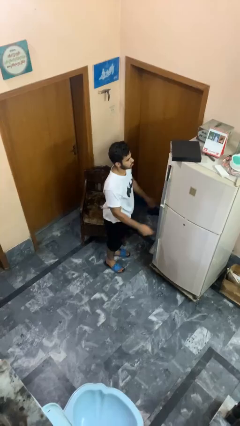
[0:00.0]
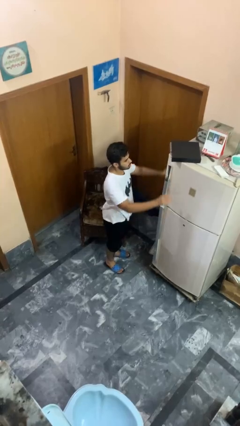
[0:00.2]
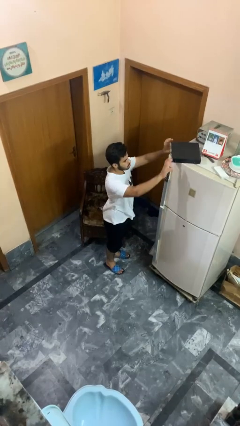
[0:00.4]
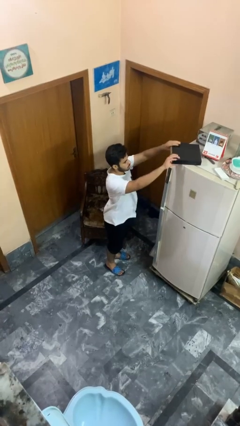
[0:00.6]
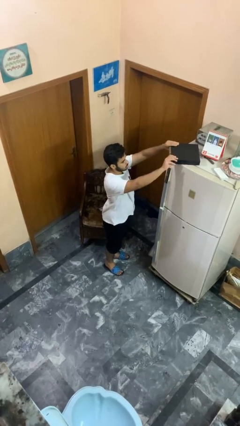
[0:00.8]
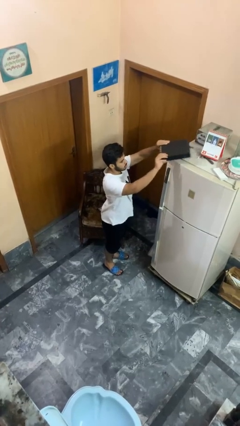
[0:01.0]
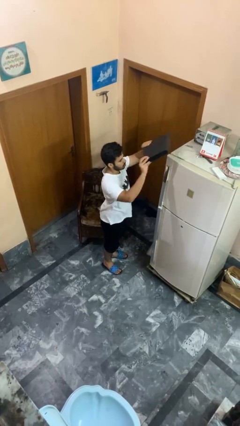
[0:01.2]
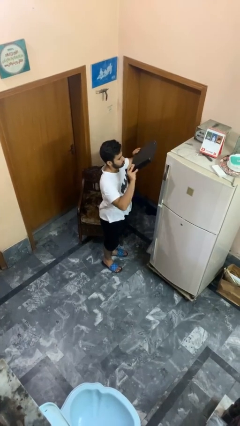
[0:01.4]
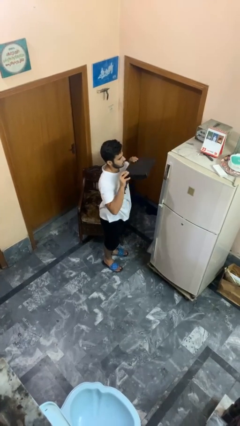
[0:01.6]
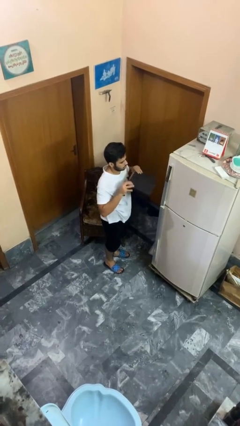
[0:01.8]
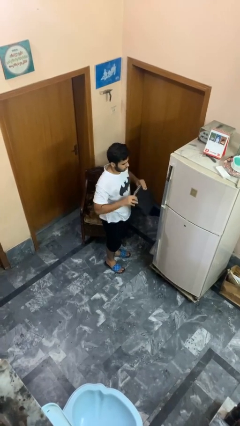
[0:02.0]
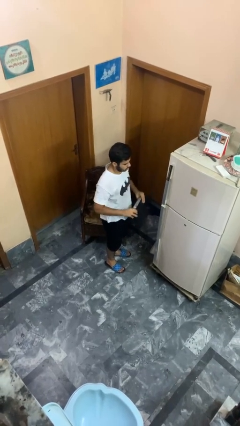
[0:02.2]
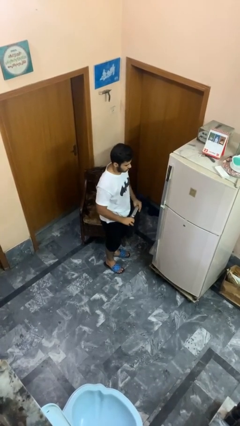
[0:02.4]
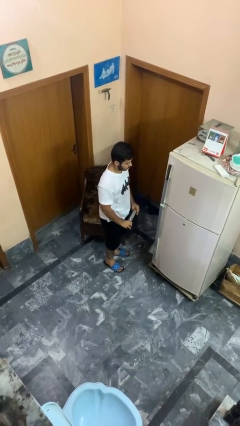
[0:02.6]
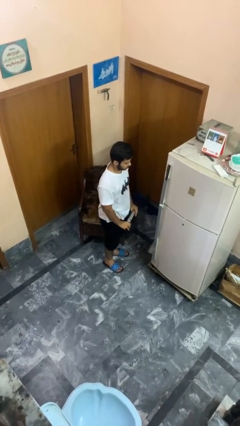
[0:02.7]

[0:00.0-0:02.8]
person picks up object from countertop

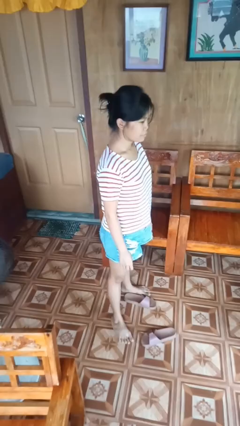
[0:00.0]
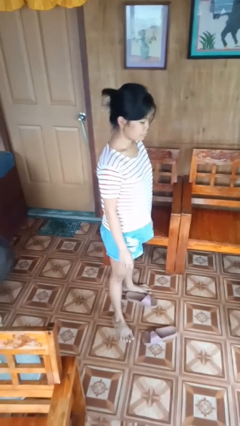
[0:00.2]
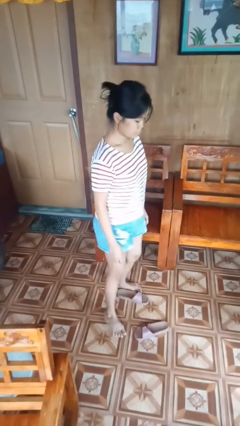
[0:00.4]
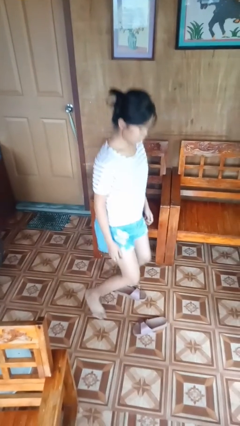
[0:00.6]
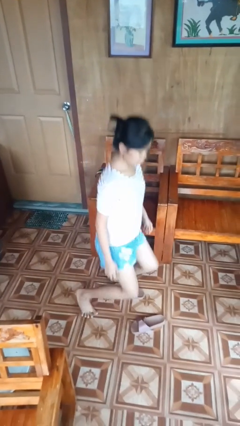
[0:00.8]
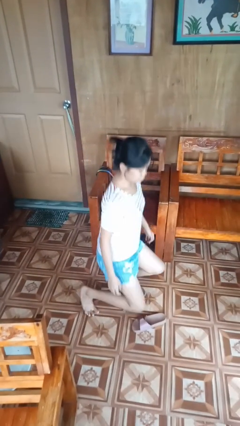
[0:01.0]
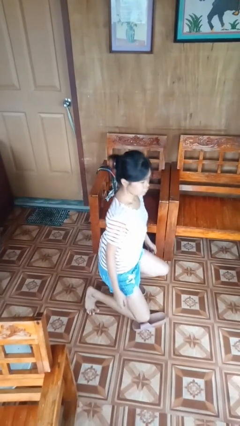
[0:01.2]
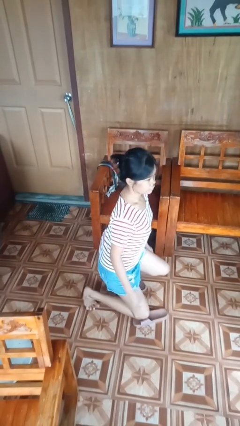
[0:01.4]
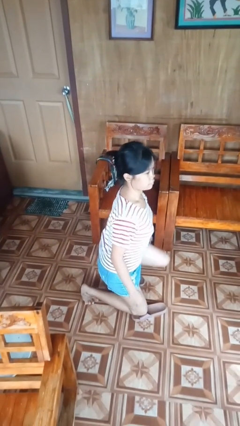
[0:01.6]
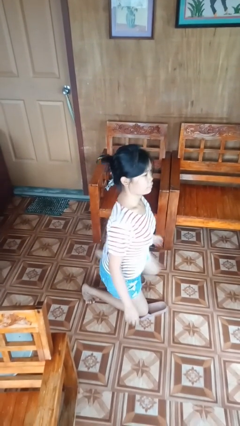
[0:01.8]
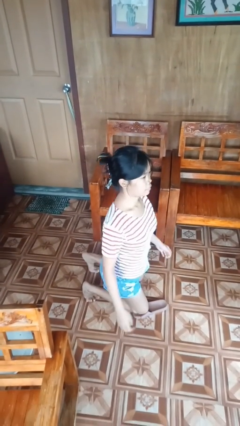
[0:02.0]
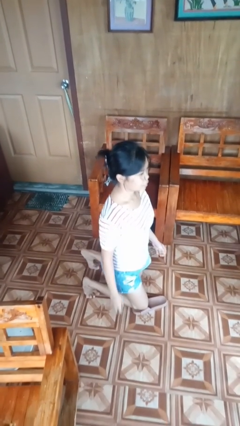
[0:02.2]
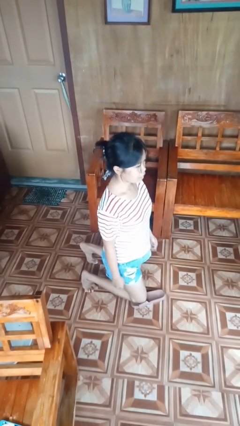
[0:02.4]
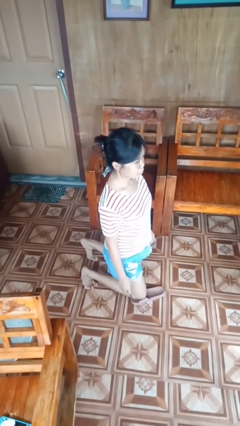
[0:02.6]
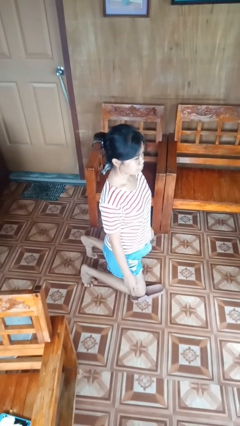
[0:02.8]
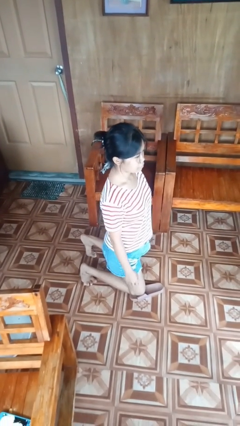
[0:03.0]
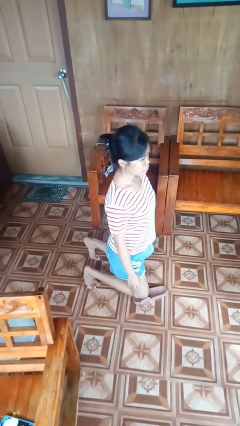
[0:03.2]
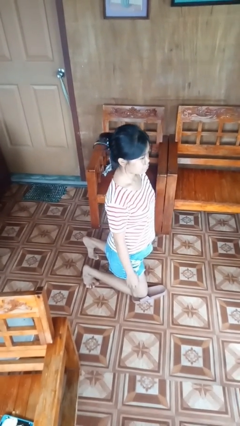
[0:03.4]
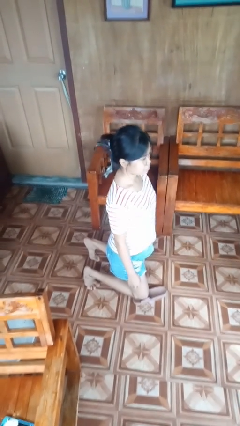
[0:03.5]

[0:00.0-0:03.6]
person kneels

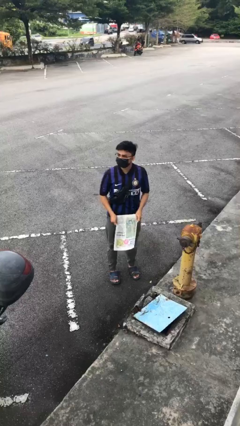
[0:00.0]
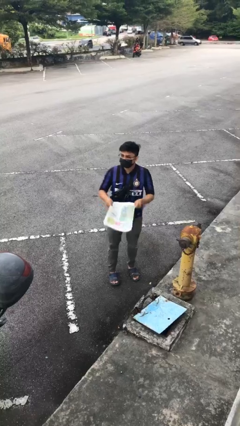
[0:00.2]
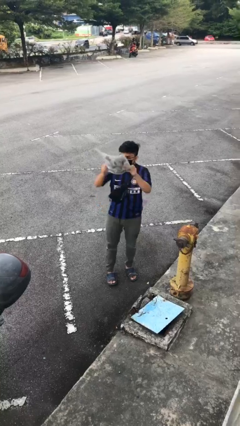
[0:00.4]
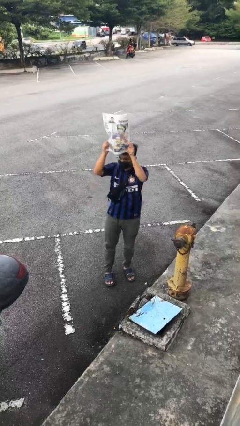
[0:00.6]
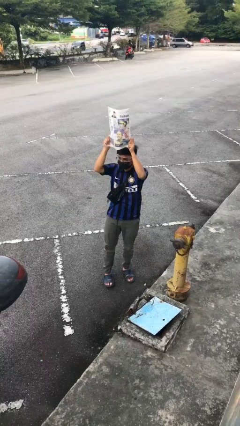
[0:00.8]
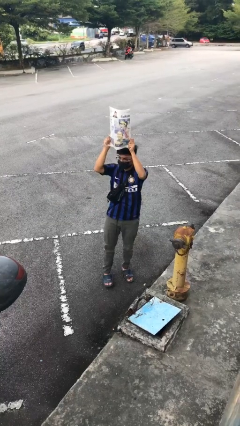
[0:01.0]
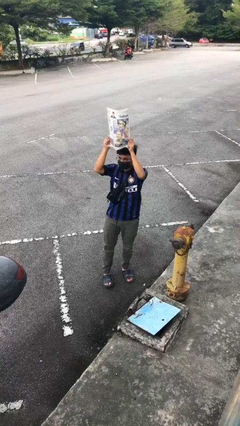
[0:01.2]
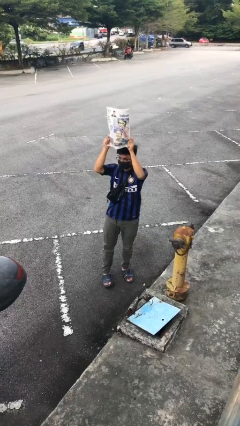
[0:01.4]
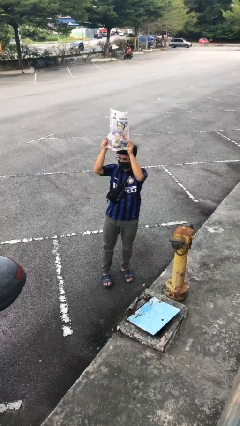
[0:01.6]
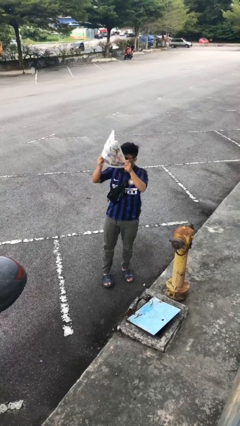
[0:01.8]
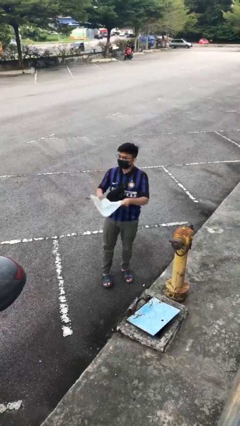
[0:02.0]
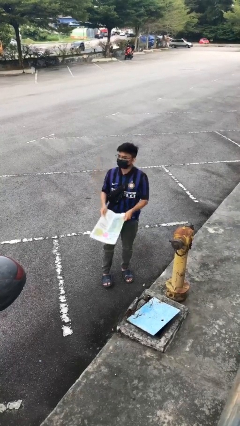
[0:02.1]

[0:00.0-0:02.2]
person holds object above head

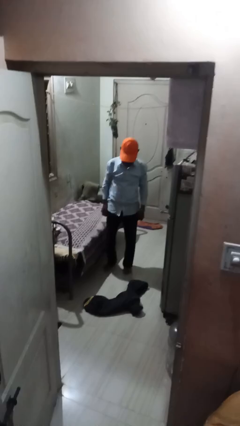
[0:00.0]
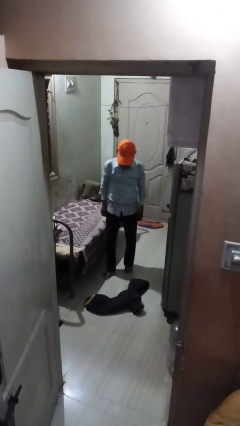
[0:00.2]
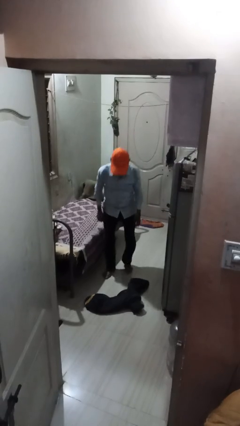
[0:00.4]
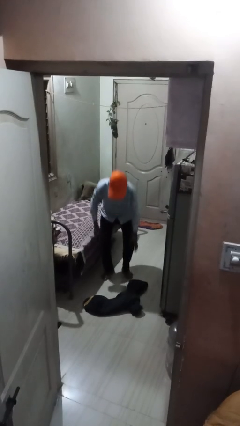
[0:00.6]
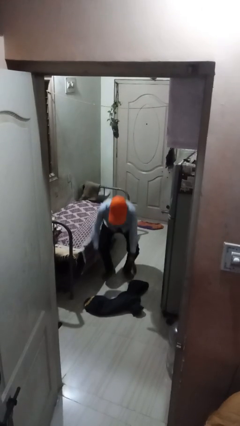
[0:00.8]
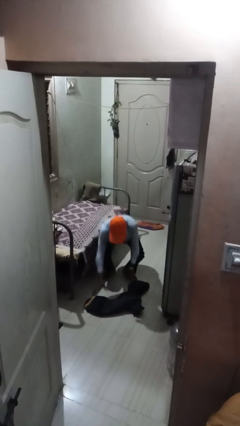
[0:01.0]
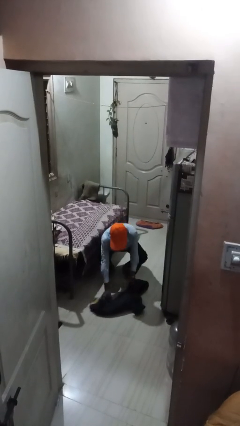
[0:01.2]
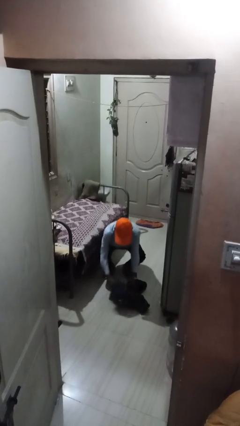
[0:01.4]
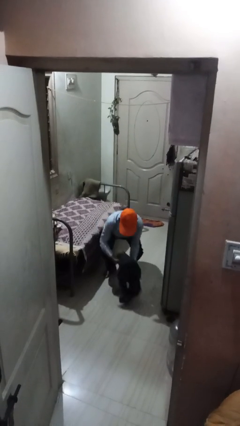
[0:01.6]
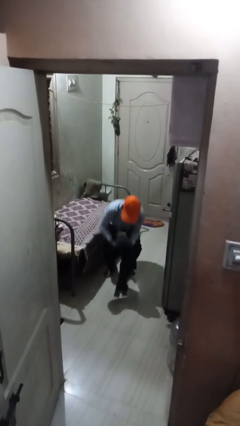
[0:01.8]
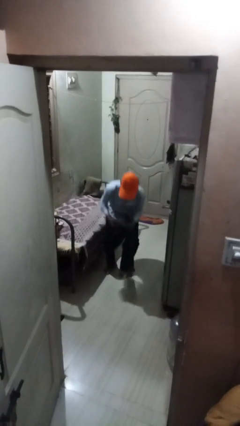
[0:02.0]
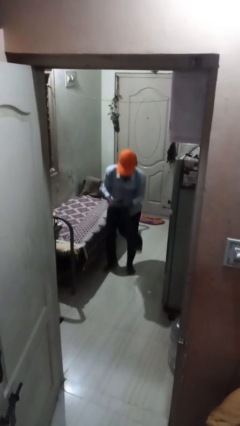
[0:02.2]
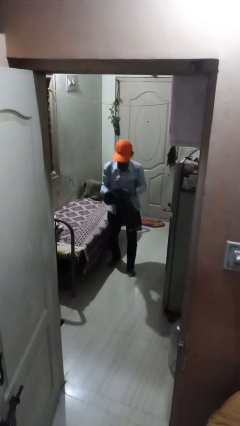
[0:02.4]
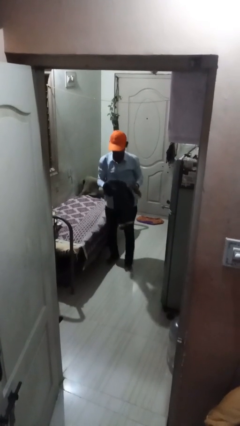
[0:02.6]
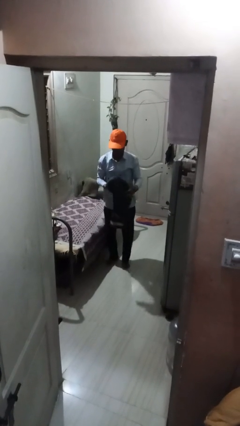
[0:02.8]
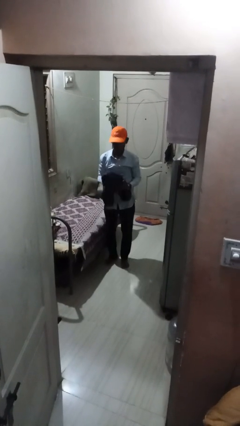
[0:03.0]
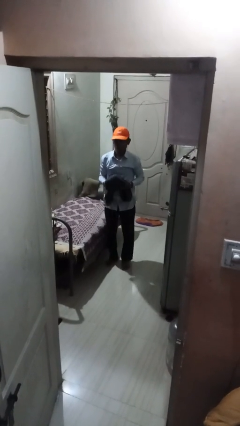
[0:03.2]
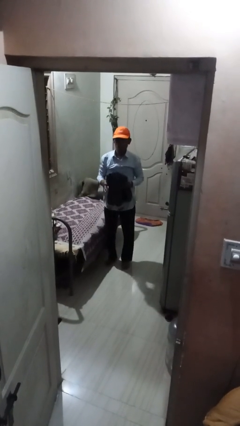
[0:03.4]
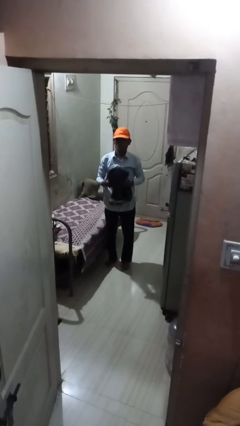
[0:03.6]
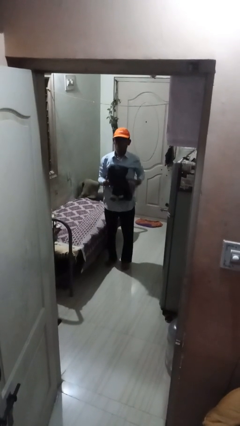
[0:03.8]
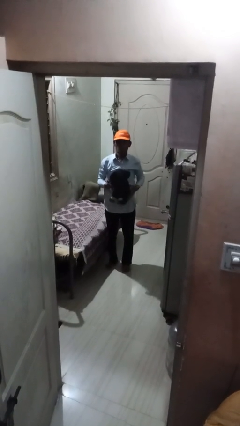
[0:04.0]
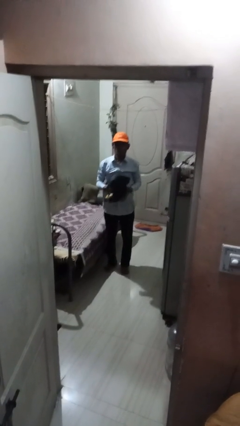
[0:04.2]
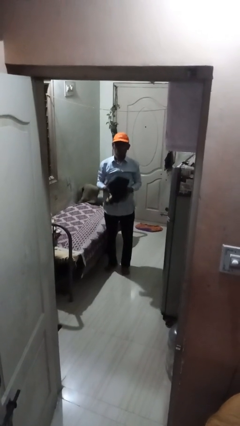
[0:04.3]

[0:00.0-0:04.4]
person picks up object from floor

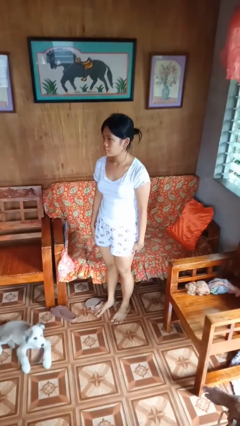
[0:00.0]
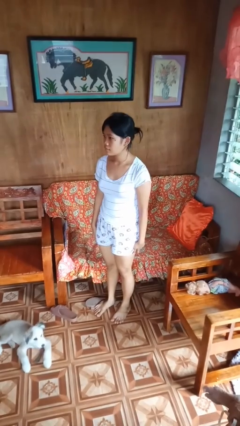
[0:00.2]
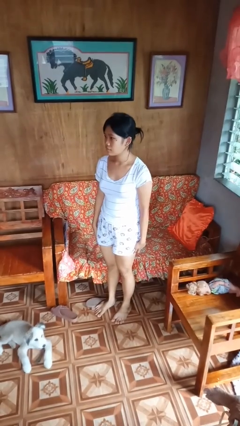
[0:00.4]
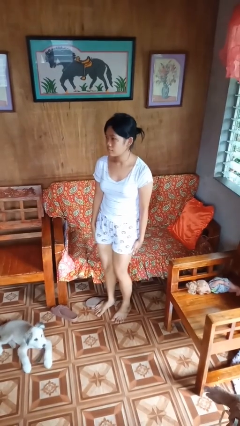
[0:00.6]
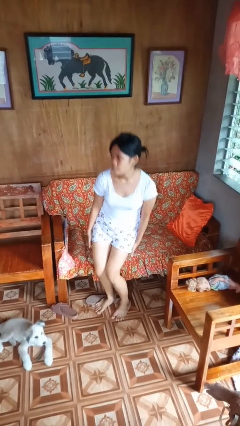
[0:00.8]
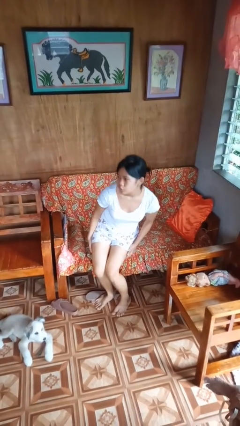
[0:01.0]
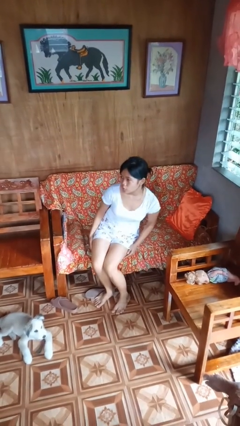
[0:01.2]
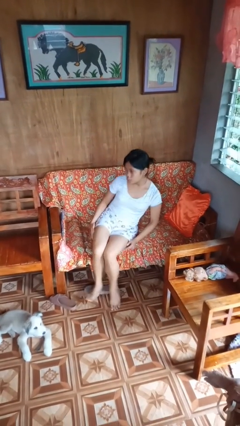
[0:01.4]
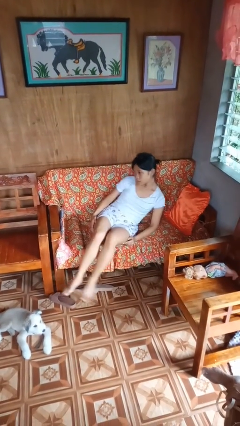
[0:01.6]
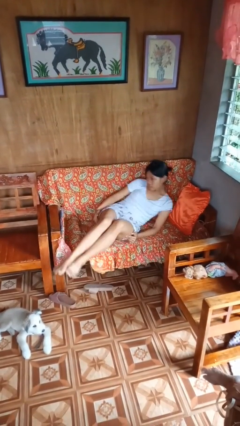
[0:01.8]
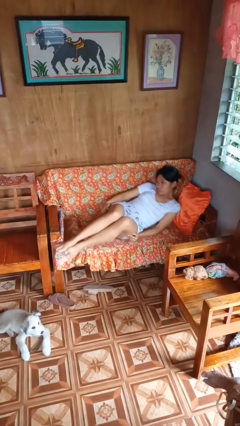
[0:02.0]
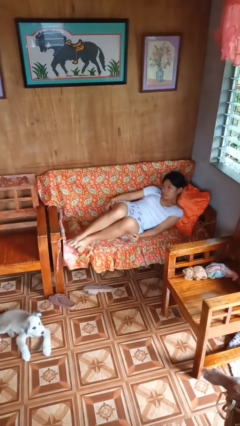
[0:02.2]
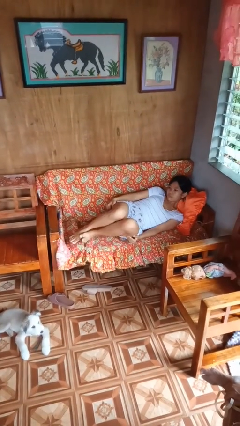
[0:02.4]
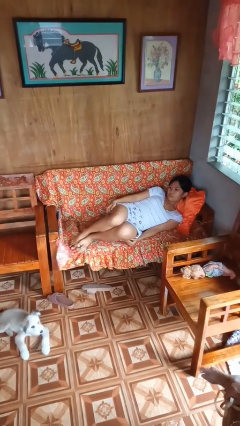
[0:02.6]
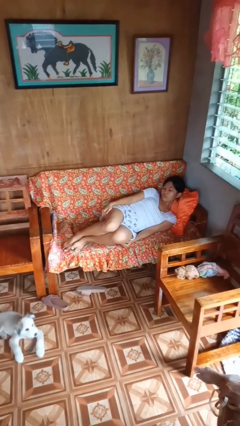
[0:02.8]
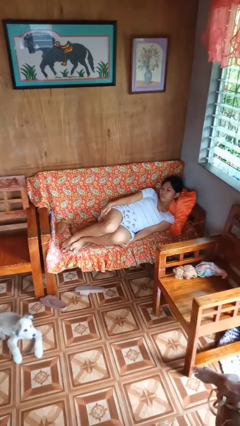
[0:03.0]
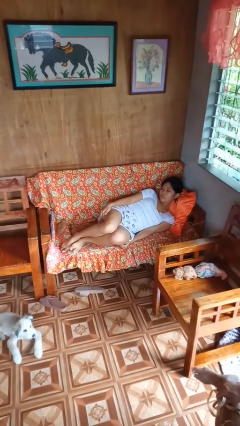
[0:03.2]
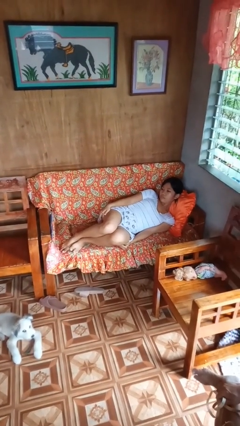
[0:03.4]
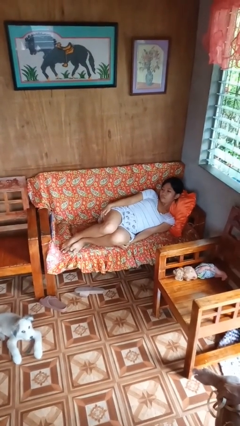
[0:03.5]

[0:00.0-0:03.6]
person lies down on couch

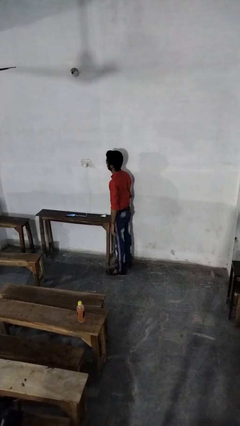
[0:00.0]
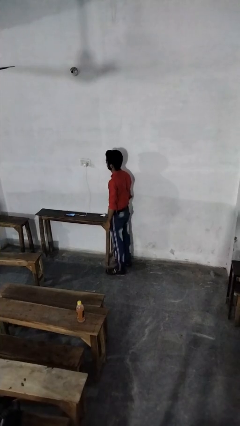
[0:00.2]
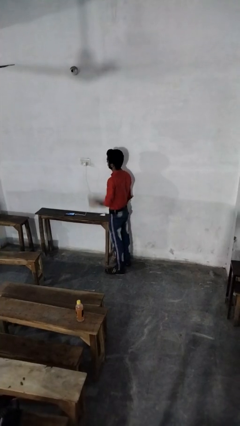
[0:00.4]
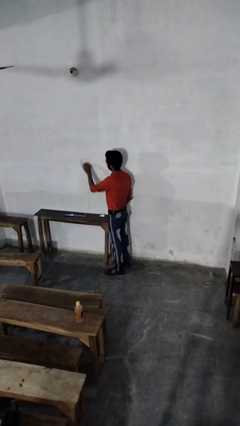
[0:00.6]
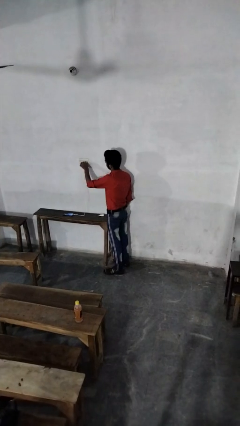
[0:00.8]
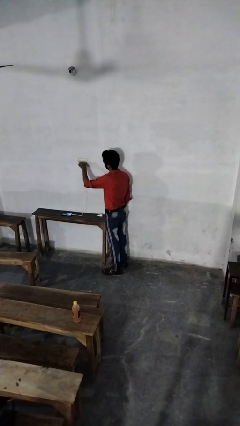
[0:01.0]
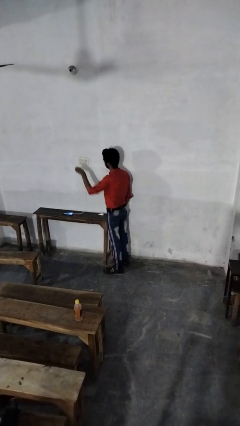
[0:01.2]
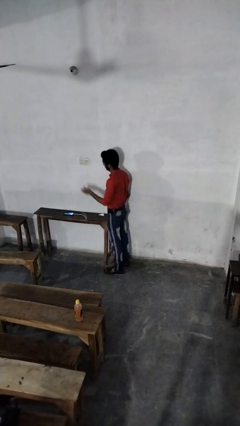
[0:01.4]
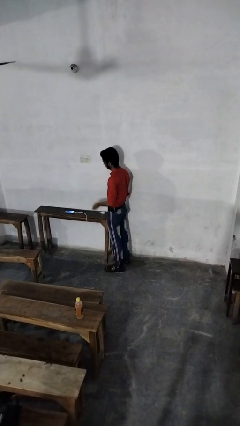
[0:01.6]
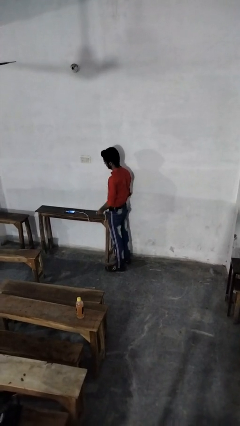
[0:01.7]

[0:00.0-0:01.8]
person unplugs from electrical socket
